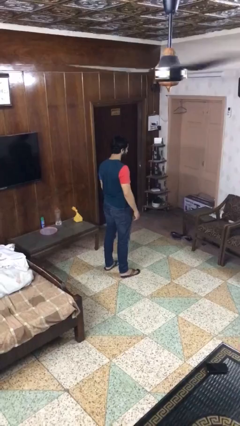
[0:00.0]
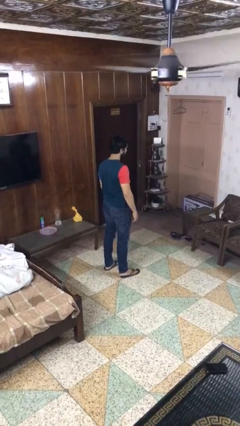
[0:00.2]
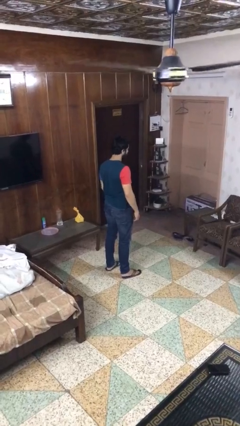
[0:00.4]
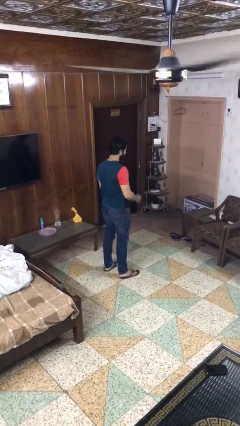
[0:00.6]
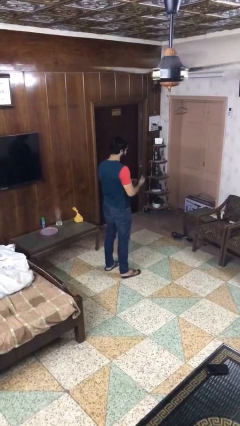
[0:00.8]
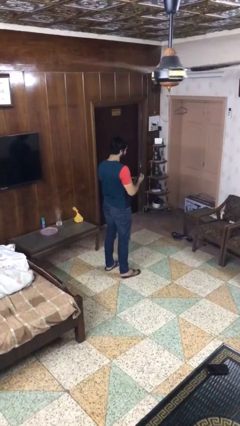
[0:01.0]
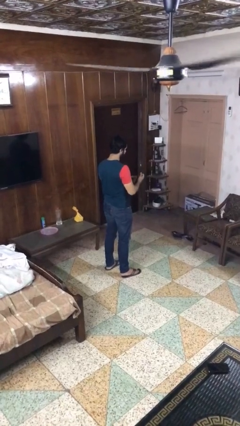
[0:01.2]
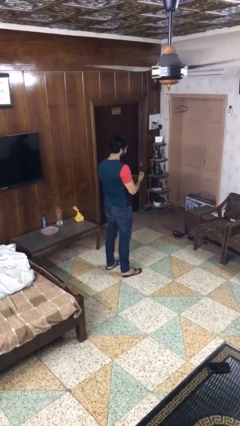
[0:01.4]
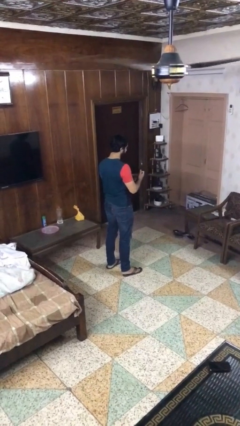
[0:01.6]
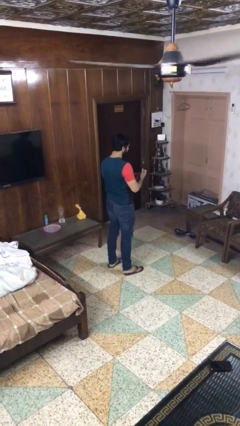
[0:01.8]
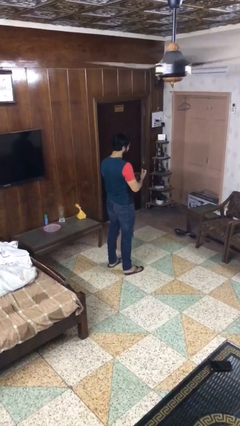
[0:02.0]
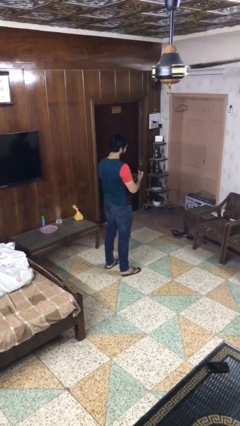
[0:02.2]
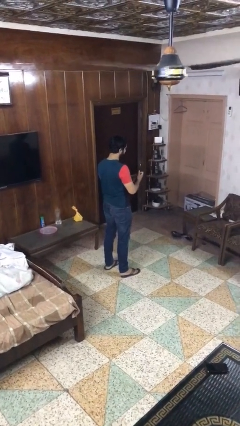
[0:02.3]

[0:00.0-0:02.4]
person files fingernails

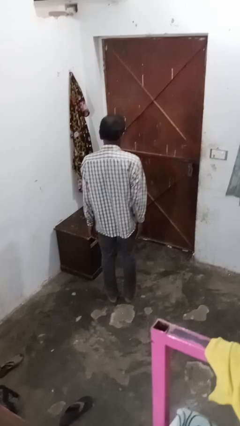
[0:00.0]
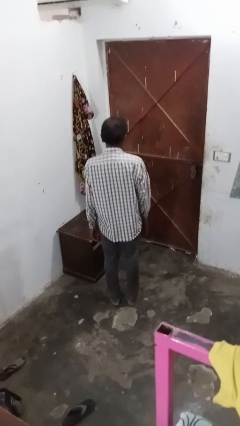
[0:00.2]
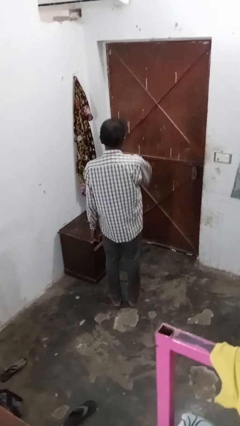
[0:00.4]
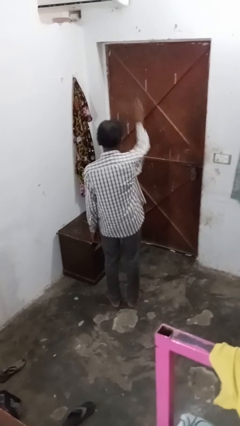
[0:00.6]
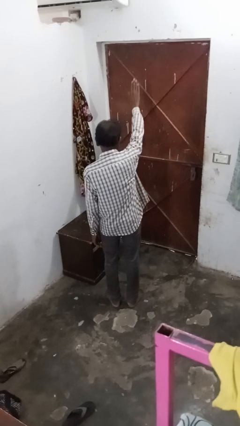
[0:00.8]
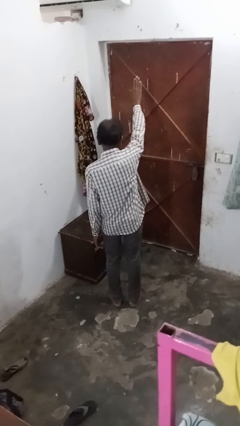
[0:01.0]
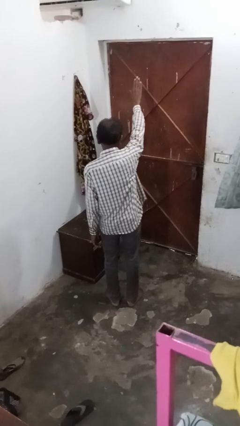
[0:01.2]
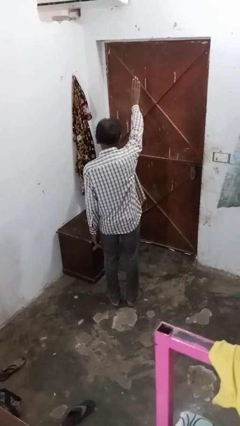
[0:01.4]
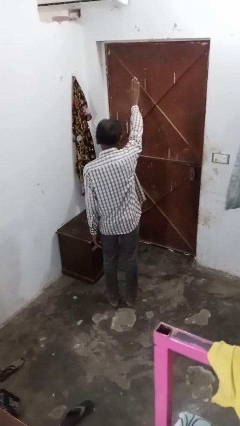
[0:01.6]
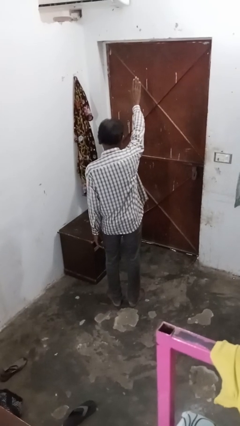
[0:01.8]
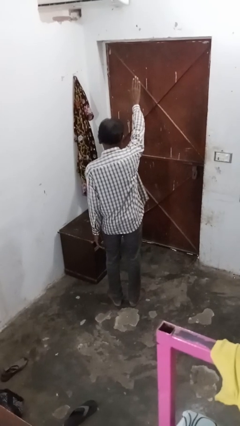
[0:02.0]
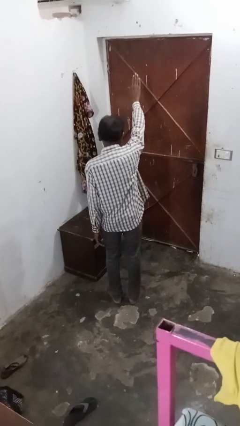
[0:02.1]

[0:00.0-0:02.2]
person gestures stop

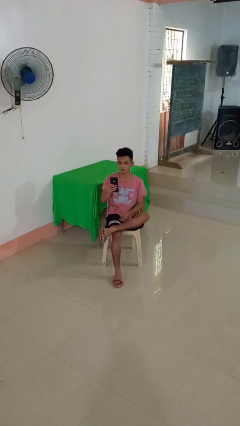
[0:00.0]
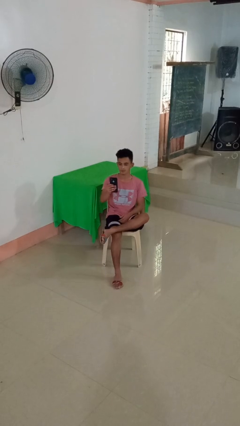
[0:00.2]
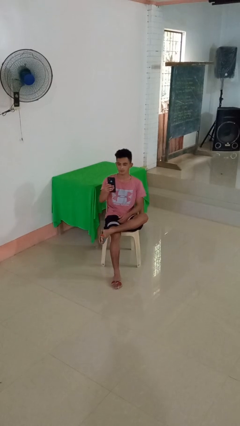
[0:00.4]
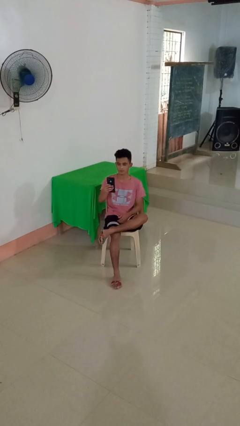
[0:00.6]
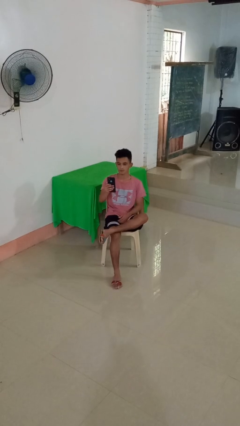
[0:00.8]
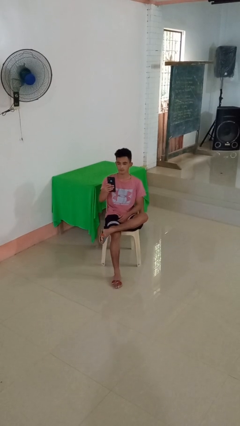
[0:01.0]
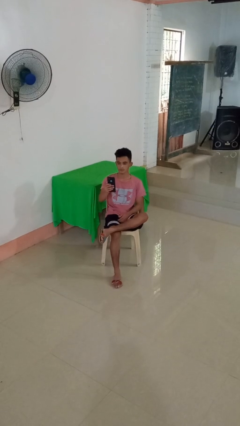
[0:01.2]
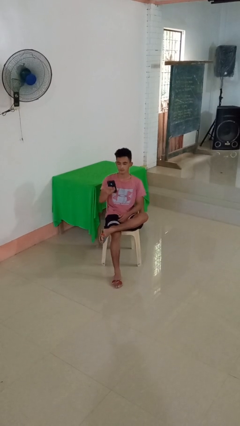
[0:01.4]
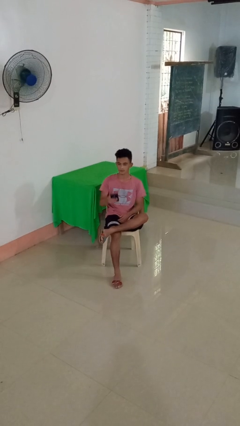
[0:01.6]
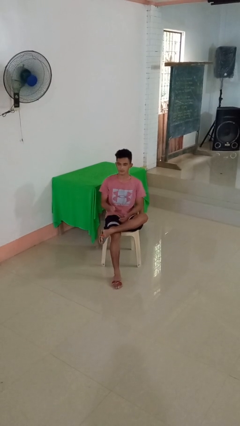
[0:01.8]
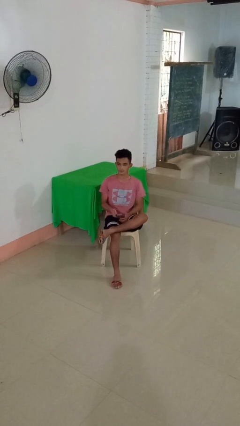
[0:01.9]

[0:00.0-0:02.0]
person takes selfie

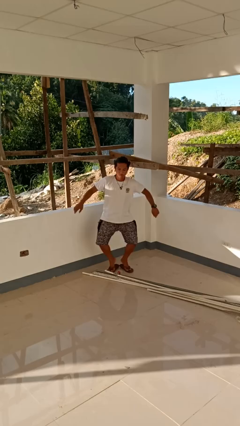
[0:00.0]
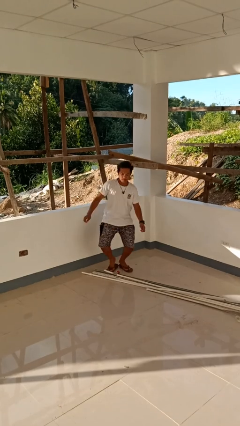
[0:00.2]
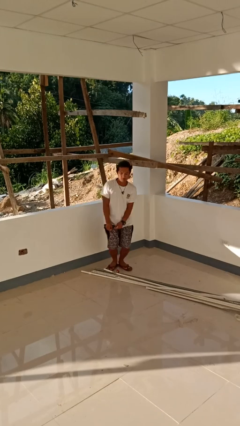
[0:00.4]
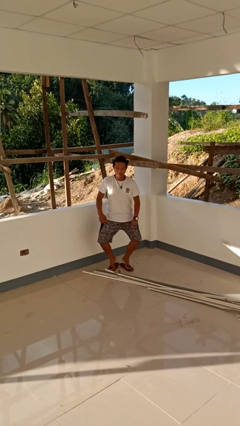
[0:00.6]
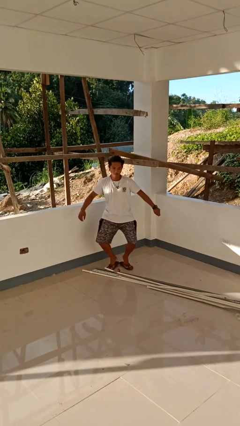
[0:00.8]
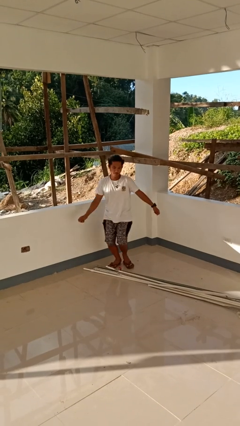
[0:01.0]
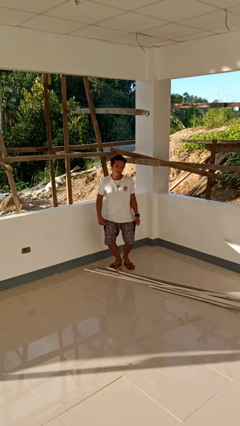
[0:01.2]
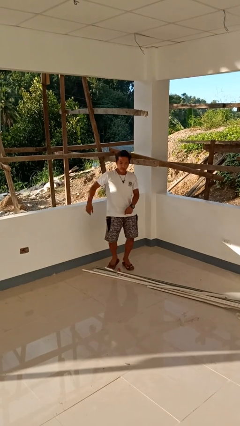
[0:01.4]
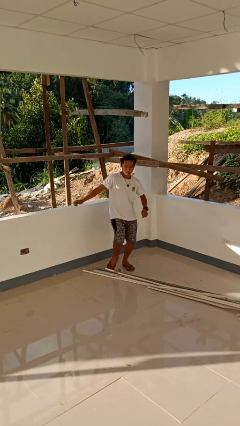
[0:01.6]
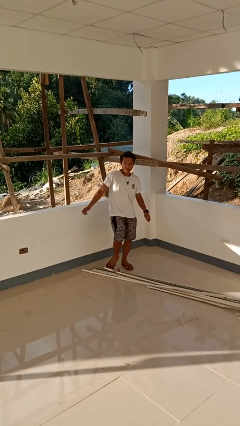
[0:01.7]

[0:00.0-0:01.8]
person dances in place

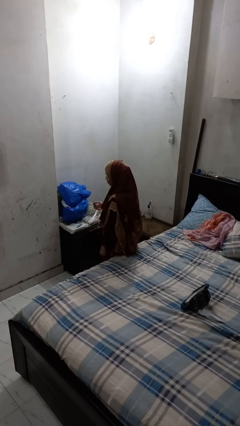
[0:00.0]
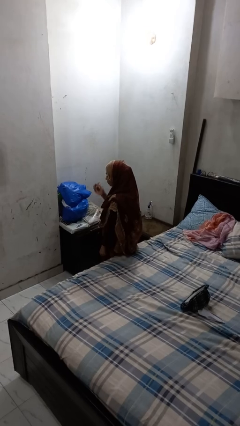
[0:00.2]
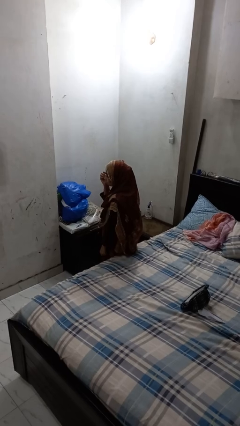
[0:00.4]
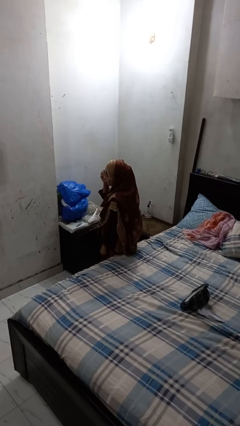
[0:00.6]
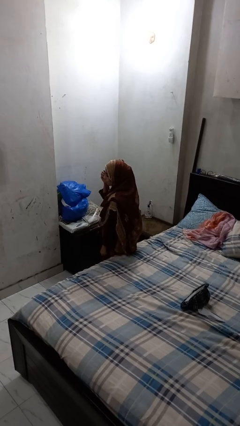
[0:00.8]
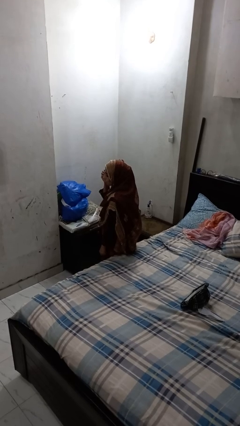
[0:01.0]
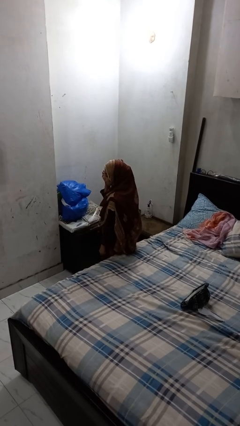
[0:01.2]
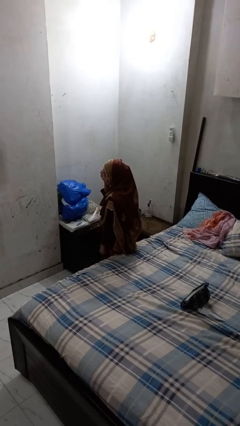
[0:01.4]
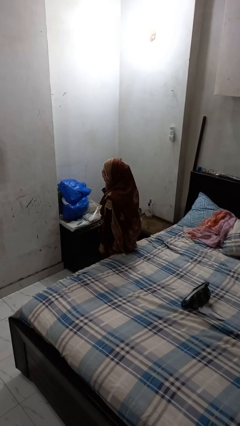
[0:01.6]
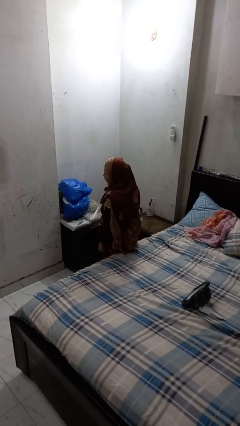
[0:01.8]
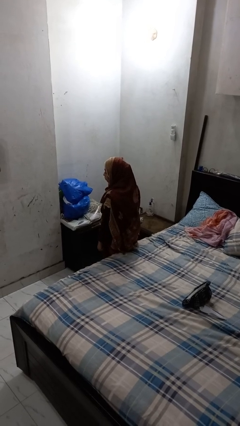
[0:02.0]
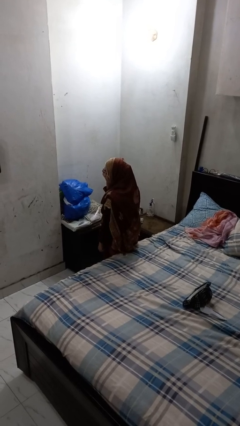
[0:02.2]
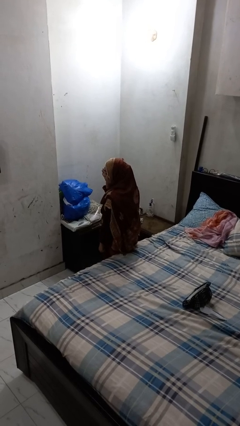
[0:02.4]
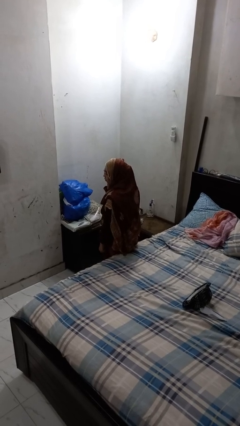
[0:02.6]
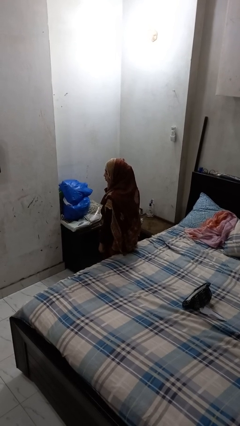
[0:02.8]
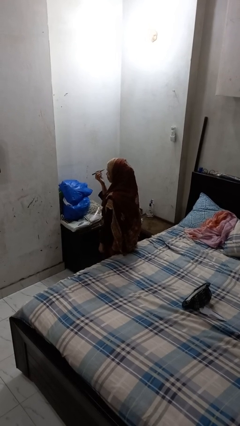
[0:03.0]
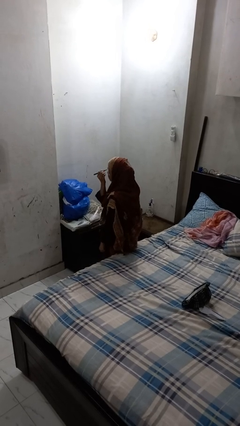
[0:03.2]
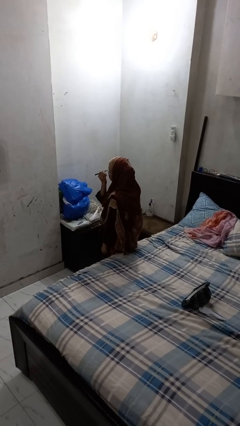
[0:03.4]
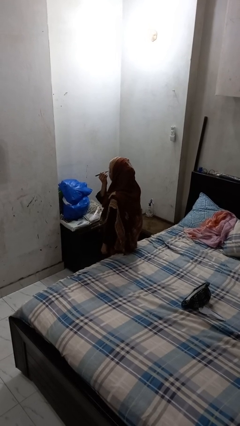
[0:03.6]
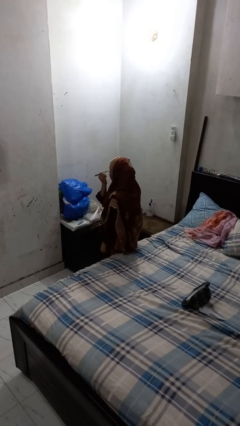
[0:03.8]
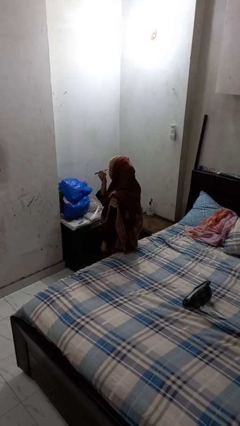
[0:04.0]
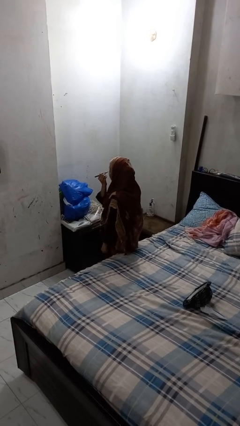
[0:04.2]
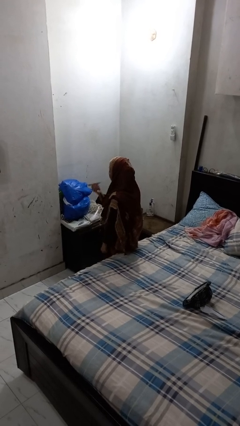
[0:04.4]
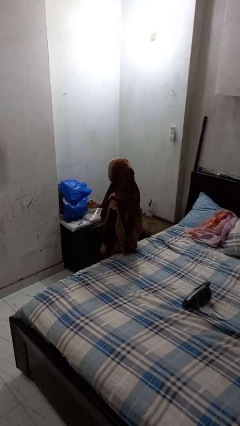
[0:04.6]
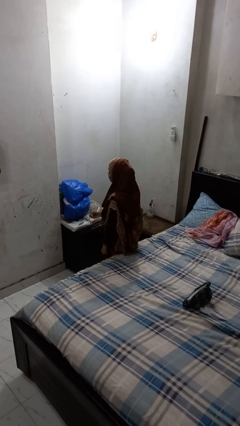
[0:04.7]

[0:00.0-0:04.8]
person applies eye makeup

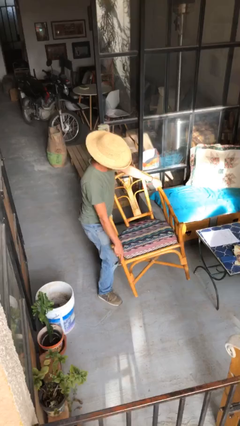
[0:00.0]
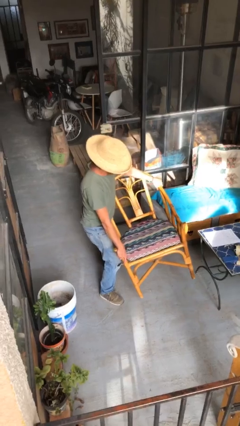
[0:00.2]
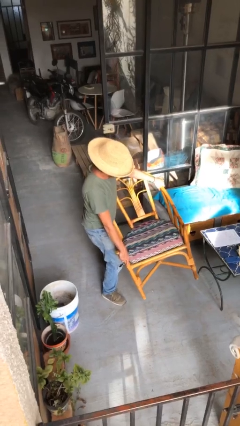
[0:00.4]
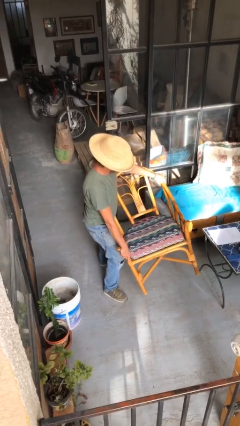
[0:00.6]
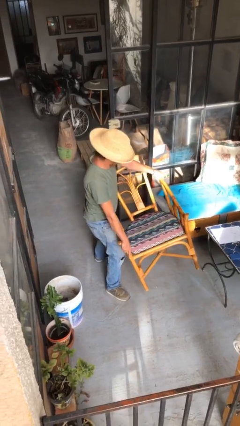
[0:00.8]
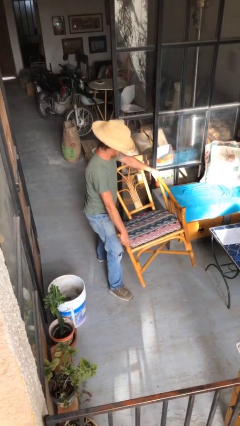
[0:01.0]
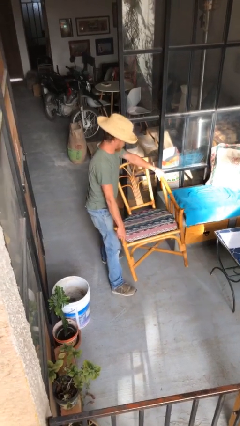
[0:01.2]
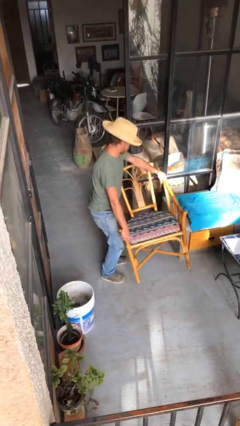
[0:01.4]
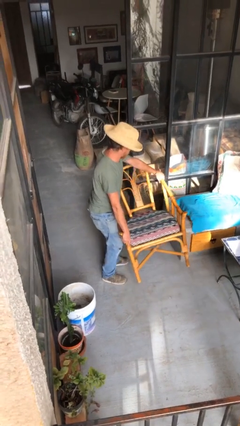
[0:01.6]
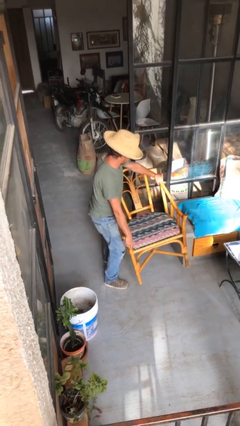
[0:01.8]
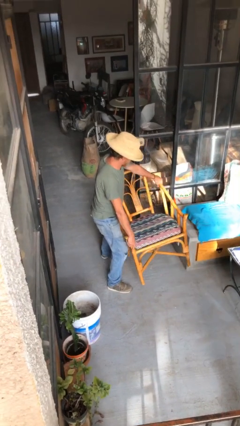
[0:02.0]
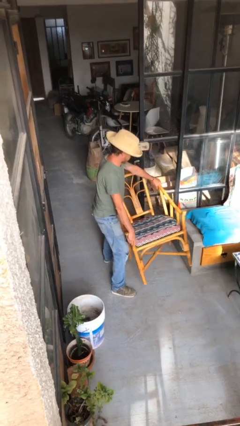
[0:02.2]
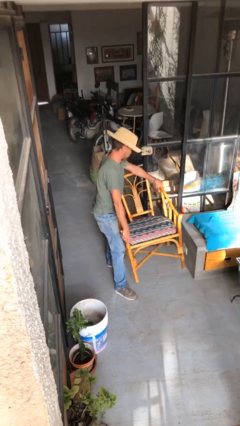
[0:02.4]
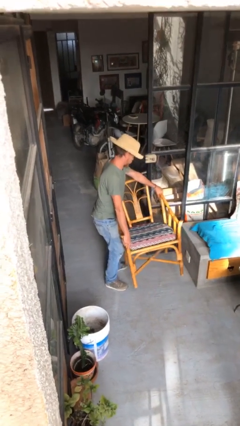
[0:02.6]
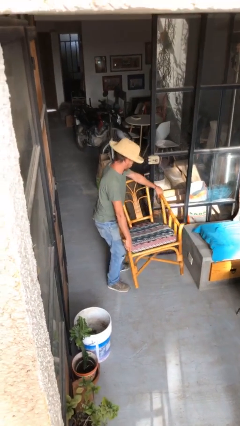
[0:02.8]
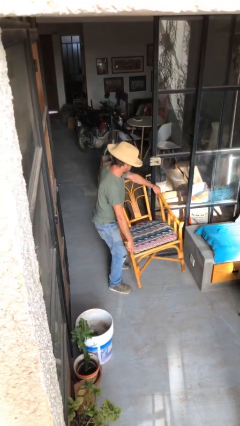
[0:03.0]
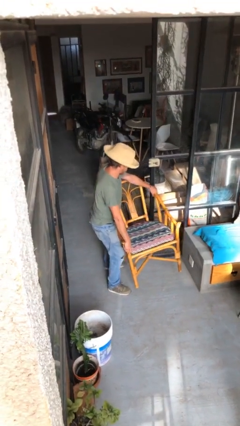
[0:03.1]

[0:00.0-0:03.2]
person carries heavy object

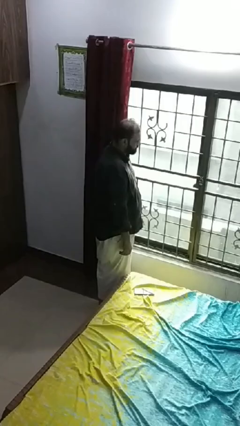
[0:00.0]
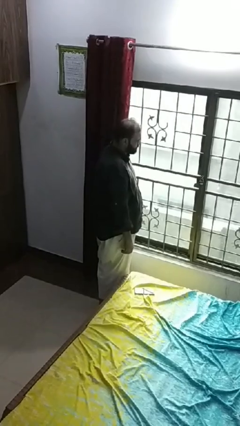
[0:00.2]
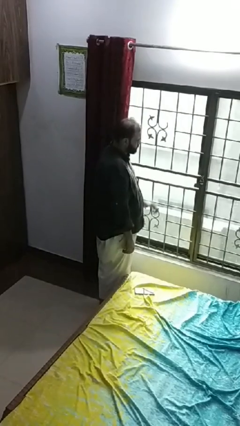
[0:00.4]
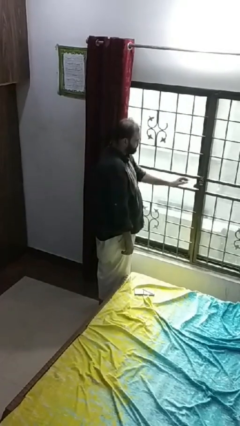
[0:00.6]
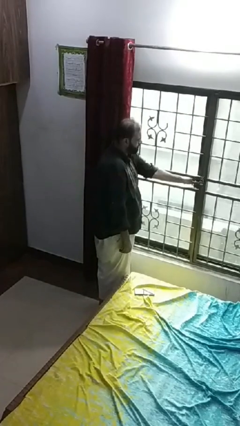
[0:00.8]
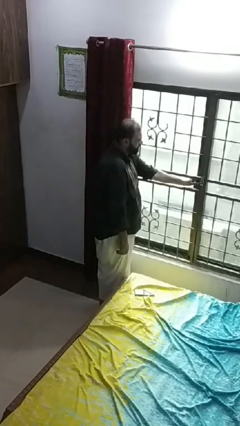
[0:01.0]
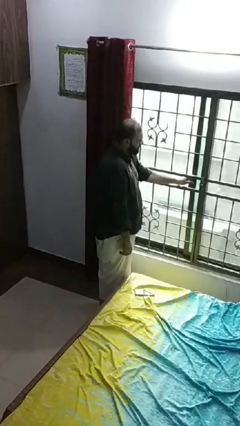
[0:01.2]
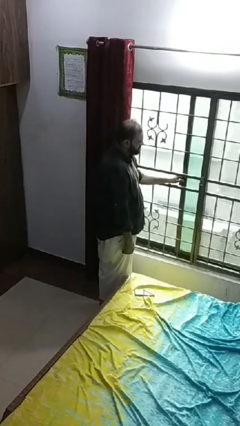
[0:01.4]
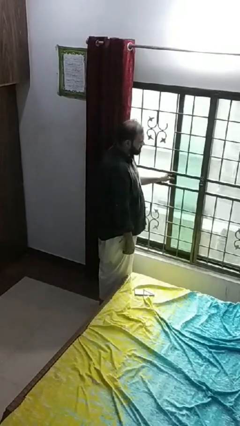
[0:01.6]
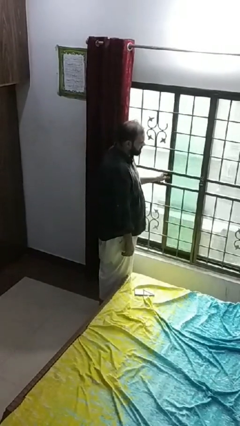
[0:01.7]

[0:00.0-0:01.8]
person opens home window
